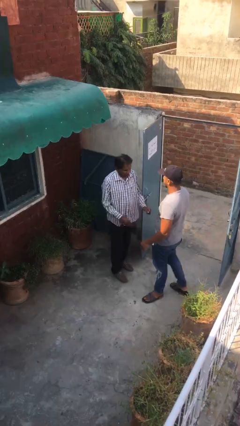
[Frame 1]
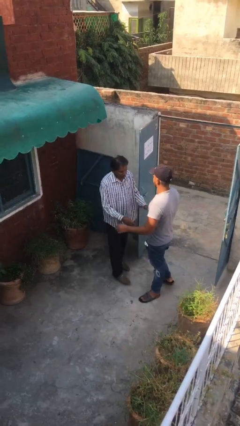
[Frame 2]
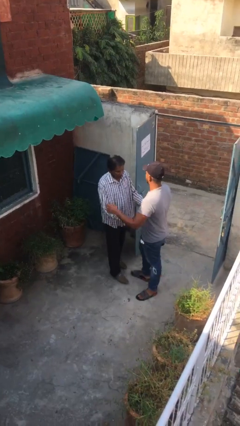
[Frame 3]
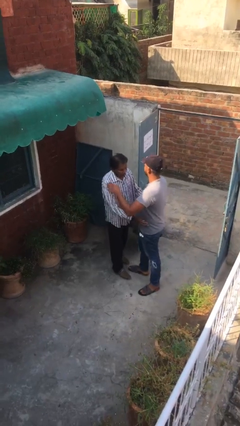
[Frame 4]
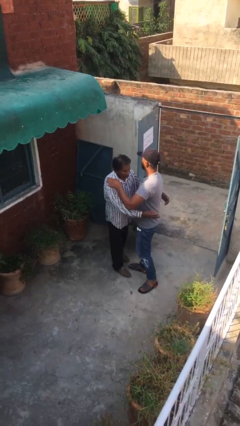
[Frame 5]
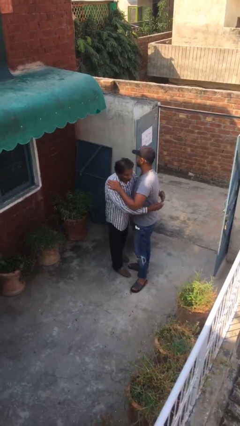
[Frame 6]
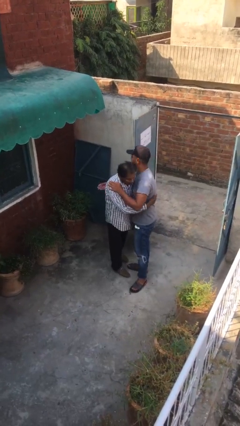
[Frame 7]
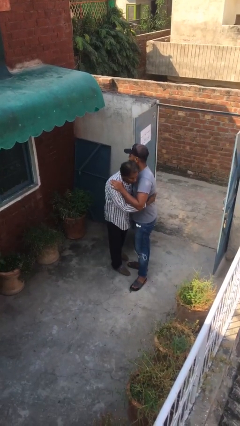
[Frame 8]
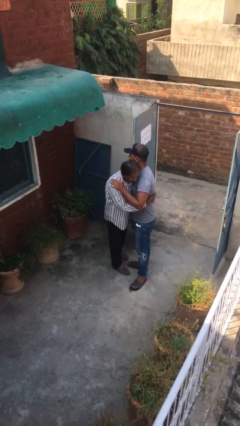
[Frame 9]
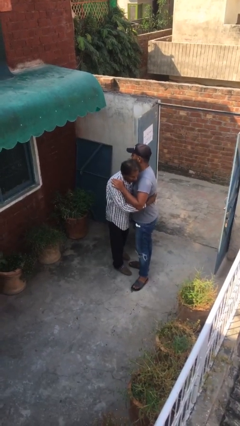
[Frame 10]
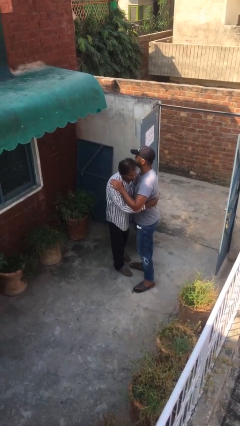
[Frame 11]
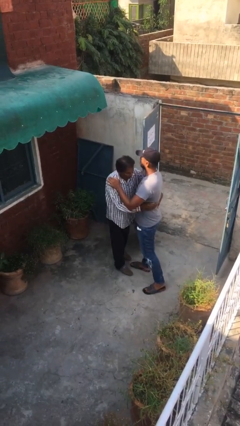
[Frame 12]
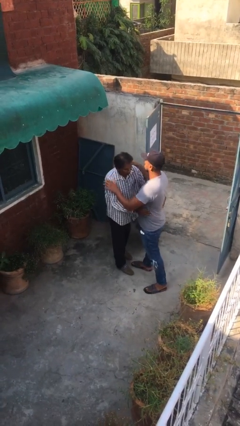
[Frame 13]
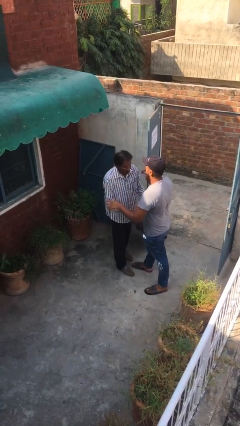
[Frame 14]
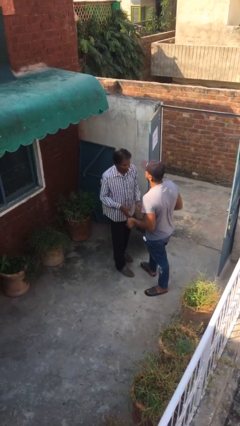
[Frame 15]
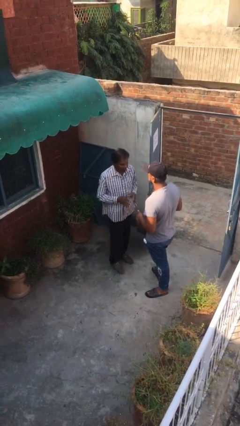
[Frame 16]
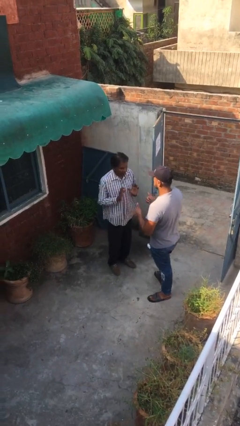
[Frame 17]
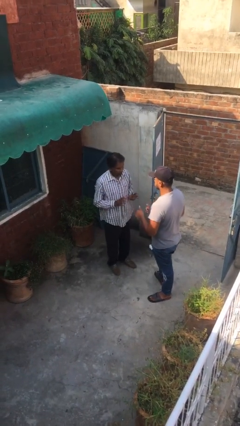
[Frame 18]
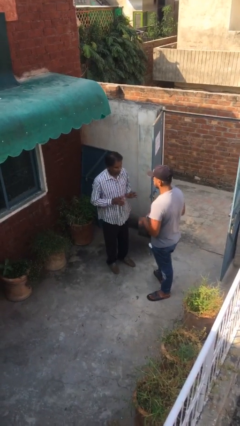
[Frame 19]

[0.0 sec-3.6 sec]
person embraces person

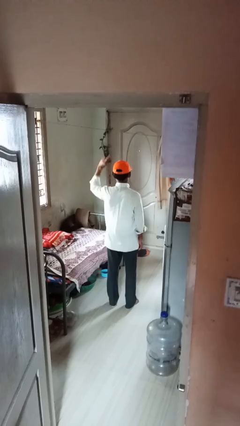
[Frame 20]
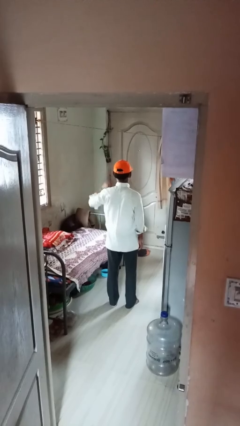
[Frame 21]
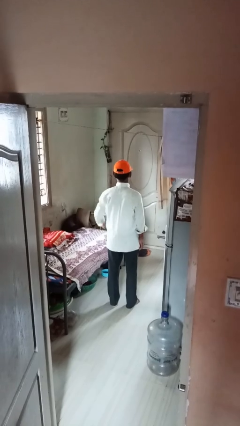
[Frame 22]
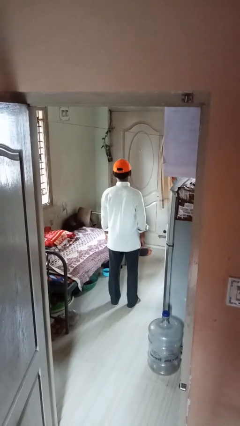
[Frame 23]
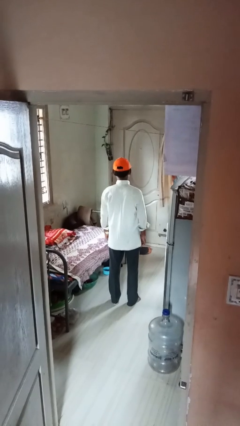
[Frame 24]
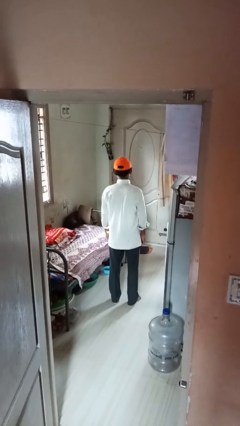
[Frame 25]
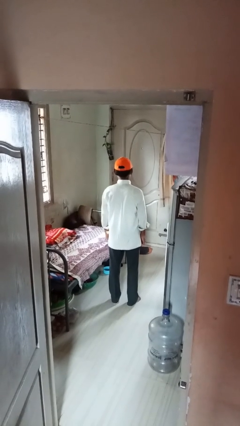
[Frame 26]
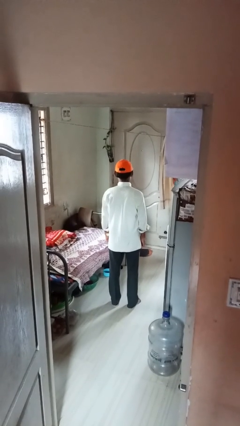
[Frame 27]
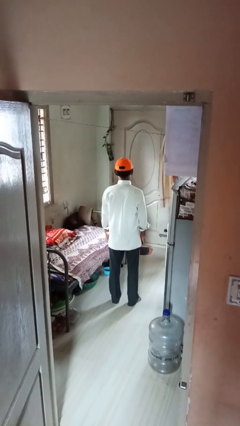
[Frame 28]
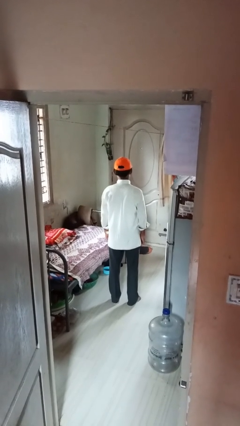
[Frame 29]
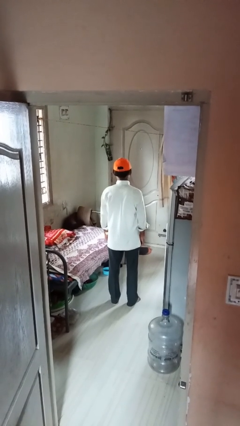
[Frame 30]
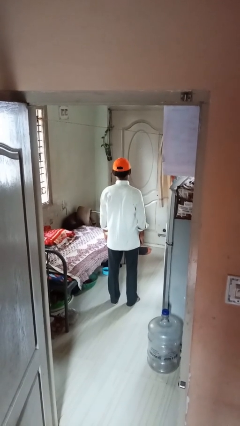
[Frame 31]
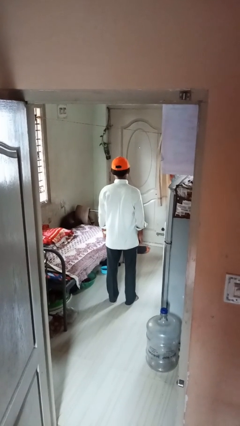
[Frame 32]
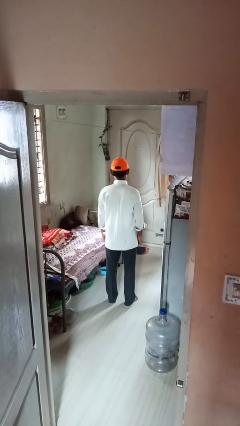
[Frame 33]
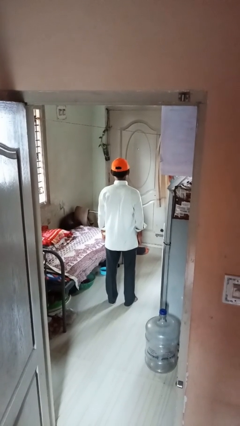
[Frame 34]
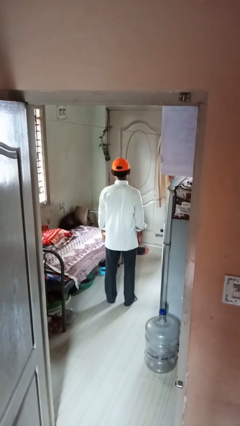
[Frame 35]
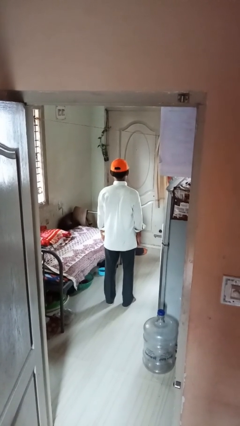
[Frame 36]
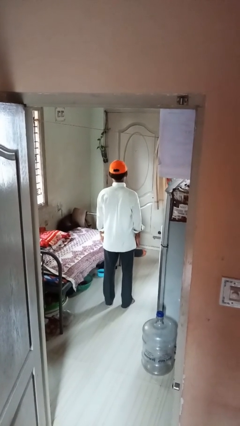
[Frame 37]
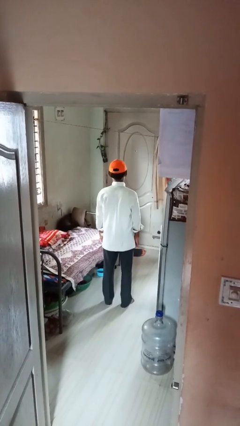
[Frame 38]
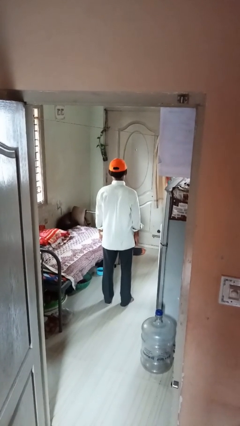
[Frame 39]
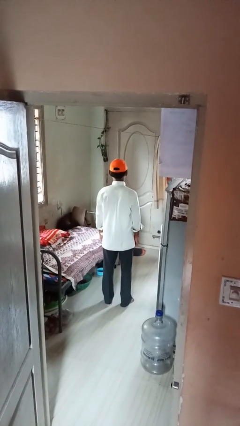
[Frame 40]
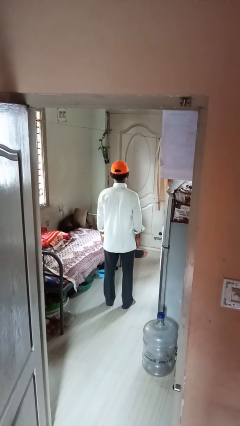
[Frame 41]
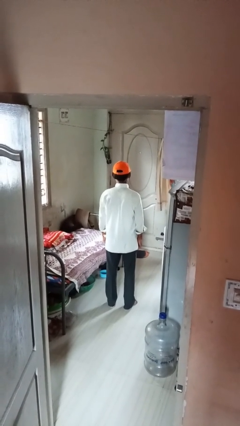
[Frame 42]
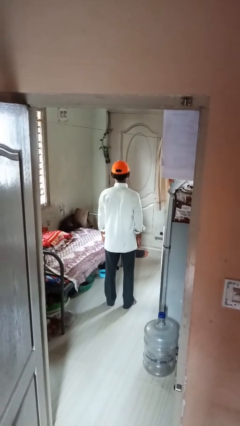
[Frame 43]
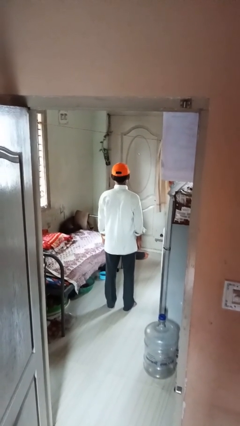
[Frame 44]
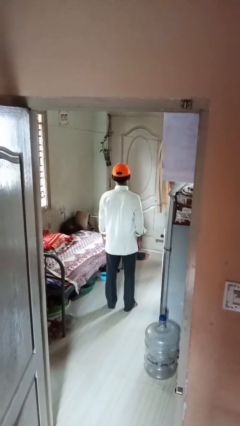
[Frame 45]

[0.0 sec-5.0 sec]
person gestures swipe down

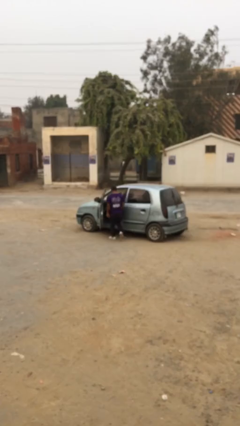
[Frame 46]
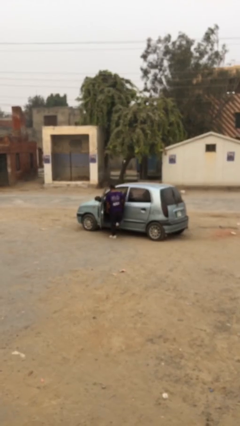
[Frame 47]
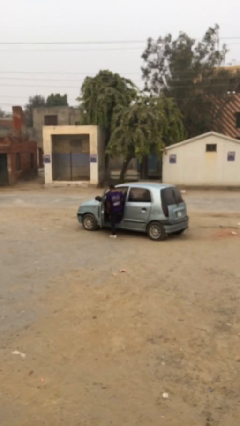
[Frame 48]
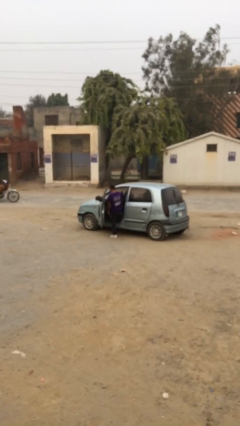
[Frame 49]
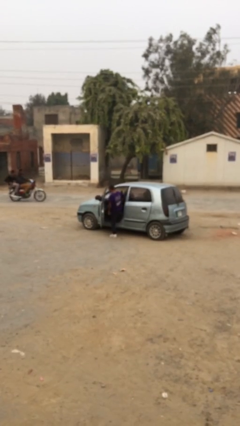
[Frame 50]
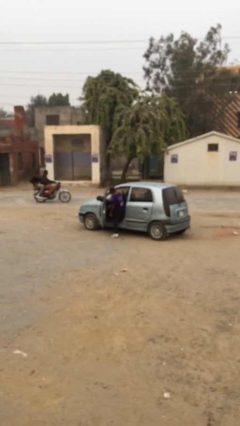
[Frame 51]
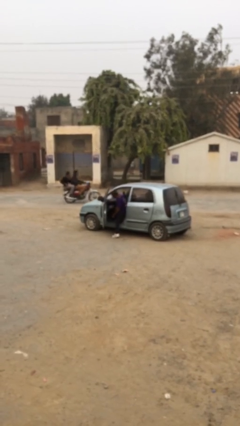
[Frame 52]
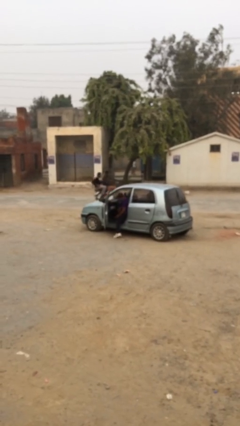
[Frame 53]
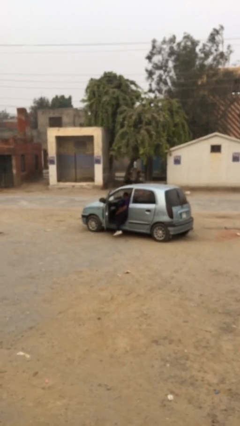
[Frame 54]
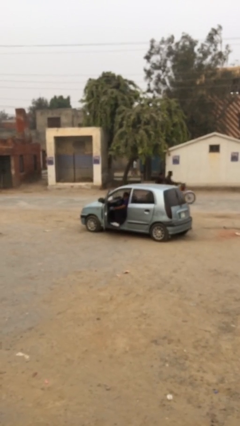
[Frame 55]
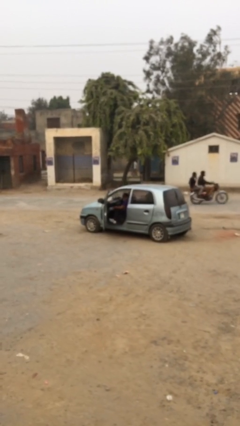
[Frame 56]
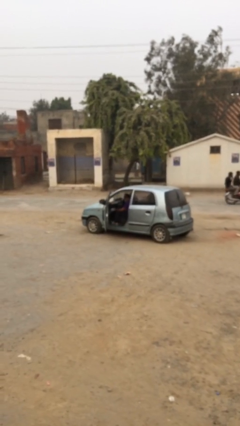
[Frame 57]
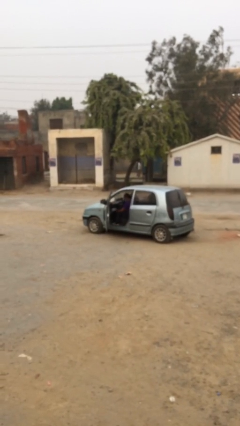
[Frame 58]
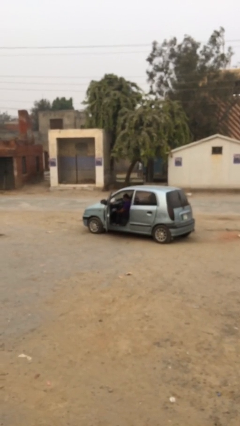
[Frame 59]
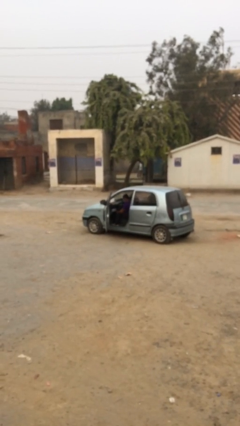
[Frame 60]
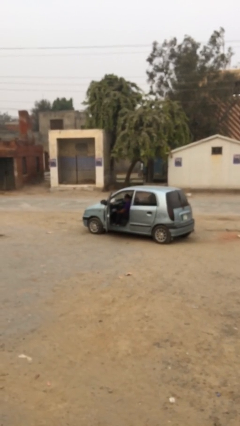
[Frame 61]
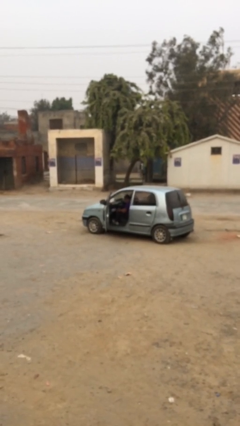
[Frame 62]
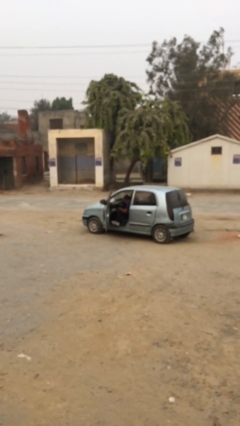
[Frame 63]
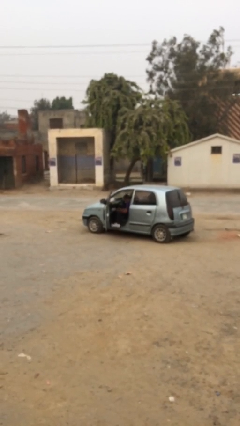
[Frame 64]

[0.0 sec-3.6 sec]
person enters car

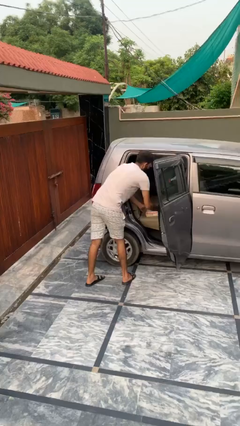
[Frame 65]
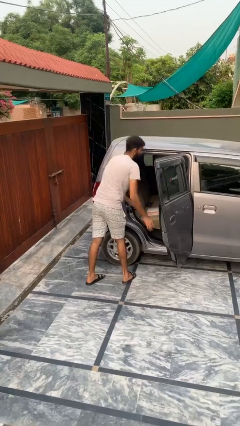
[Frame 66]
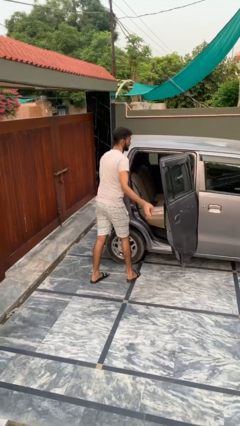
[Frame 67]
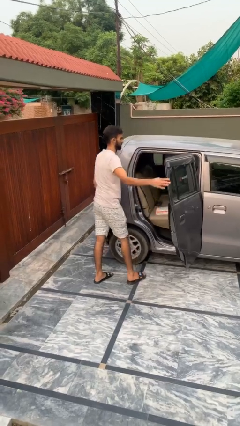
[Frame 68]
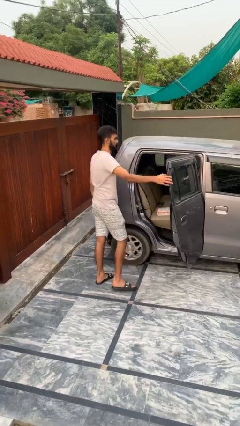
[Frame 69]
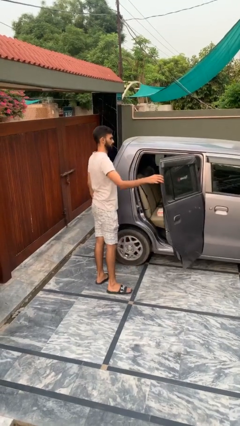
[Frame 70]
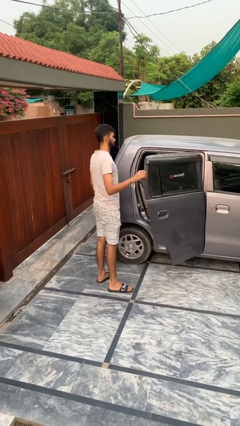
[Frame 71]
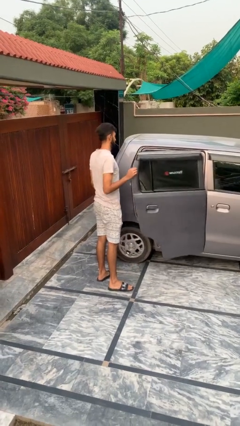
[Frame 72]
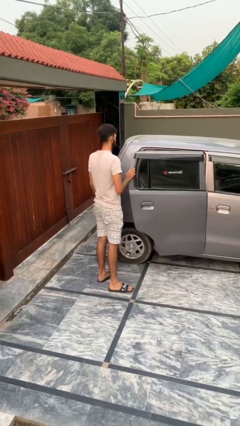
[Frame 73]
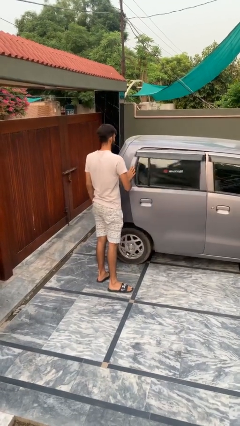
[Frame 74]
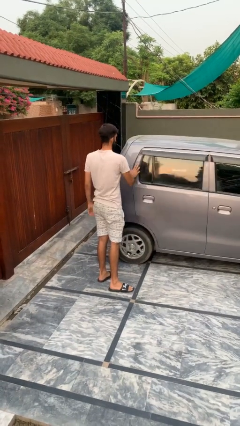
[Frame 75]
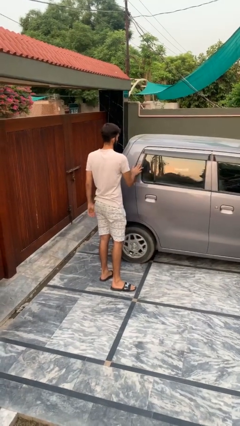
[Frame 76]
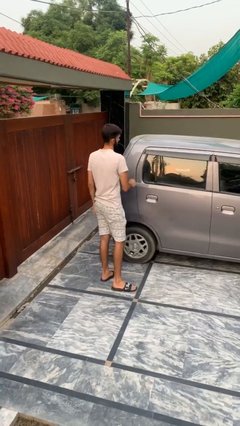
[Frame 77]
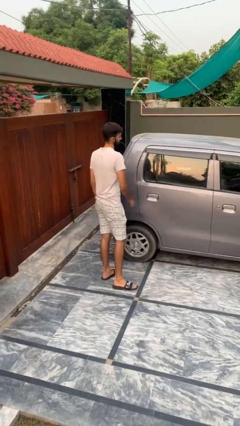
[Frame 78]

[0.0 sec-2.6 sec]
person closes car door

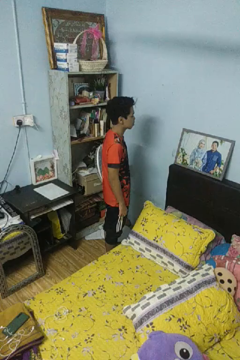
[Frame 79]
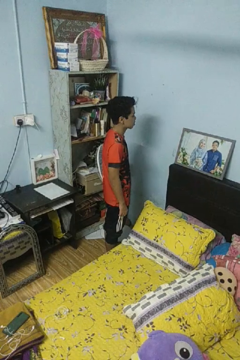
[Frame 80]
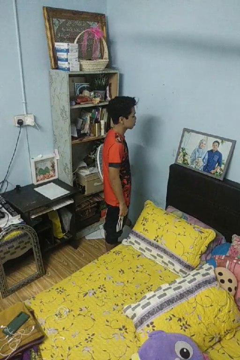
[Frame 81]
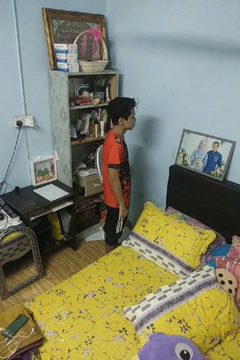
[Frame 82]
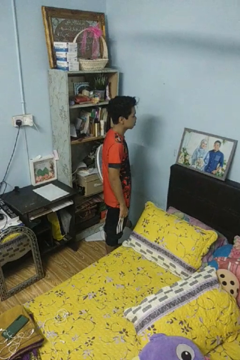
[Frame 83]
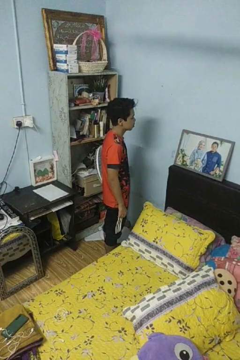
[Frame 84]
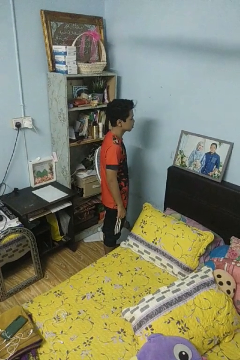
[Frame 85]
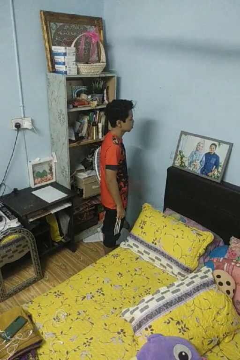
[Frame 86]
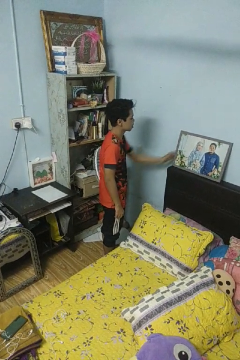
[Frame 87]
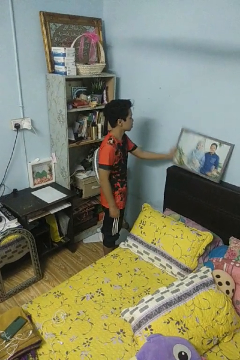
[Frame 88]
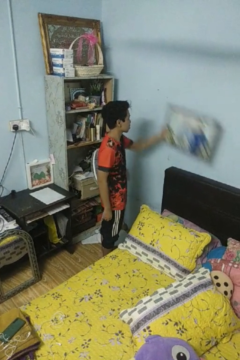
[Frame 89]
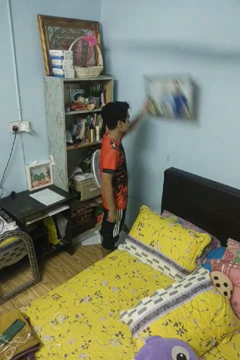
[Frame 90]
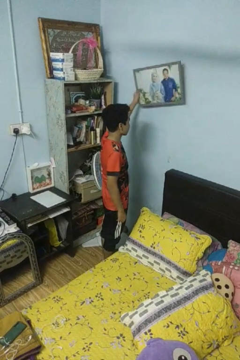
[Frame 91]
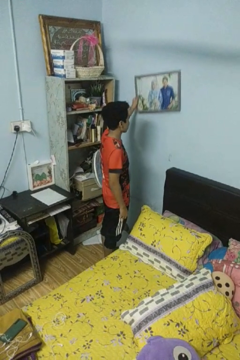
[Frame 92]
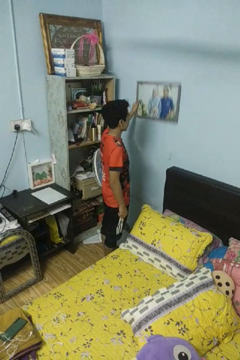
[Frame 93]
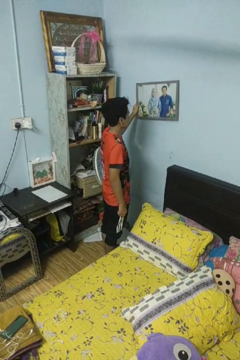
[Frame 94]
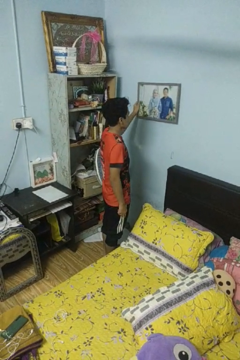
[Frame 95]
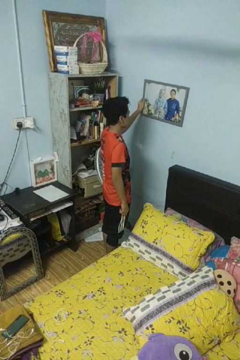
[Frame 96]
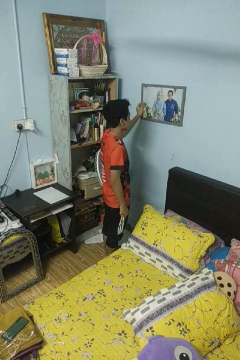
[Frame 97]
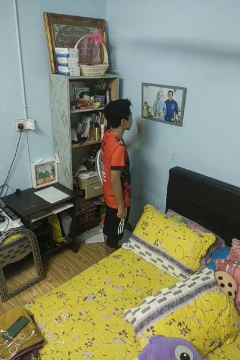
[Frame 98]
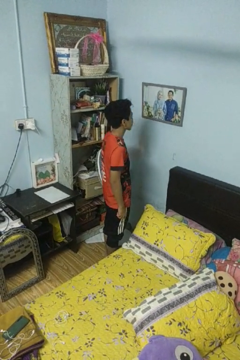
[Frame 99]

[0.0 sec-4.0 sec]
person puts up picture frame
